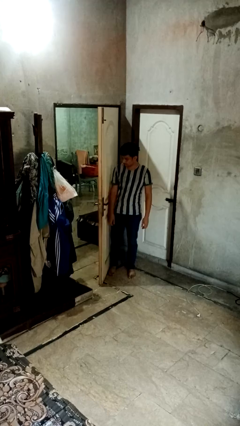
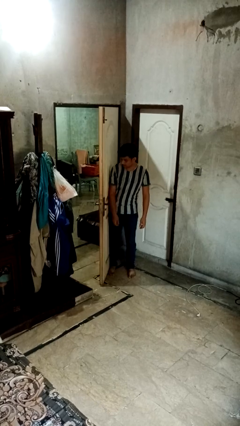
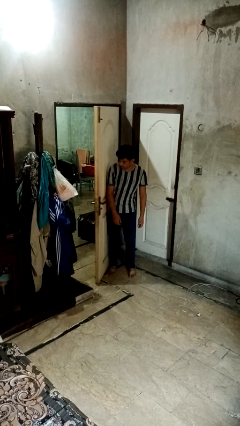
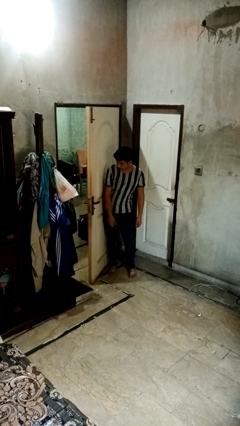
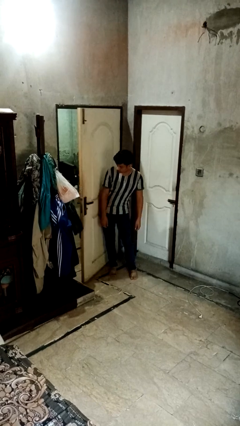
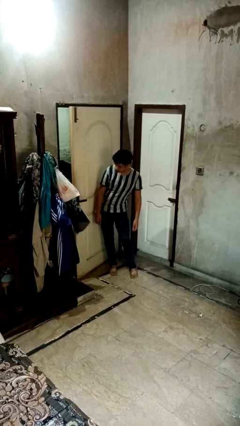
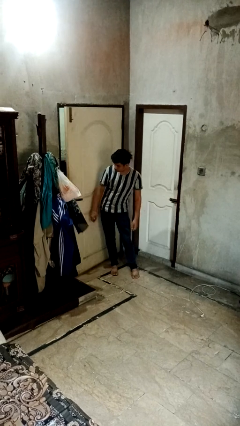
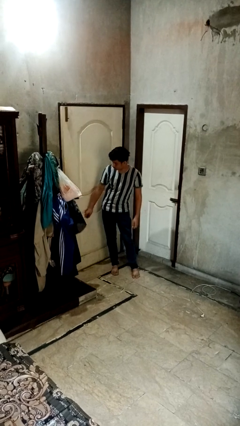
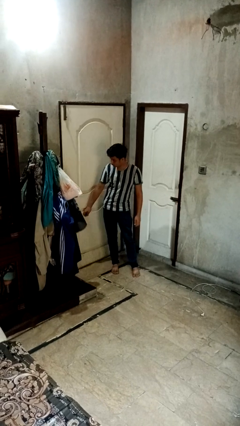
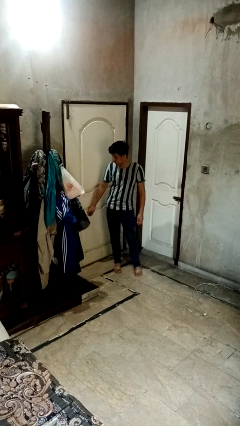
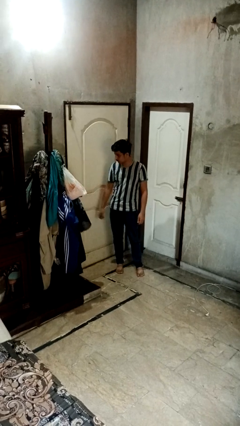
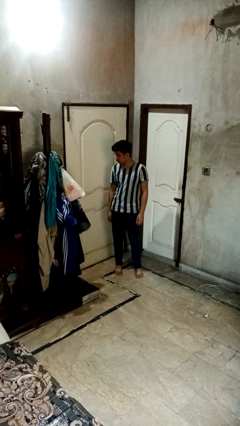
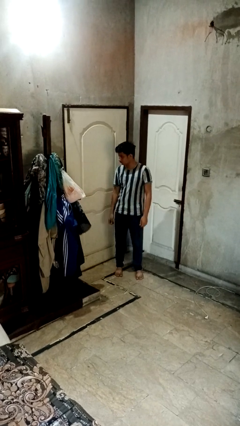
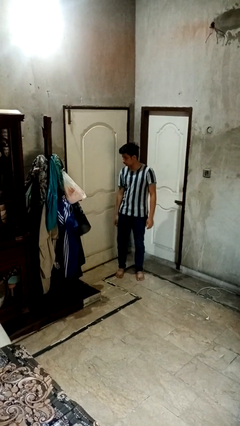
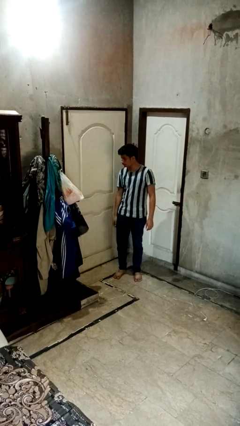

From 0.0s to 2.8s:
person closes door with hip

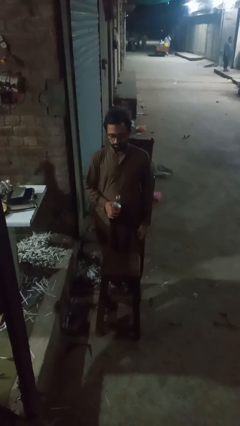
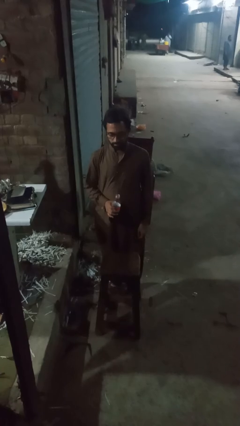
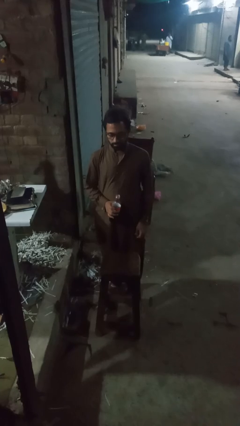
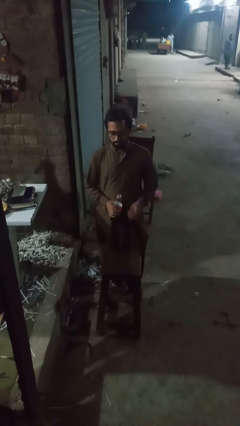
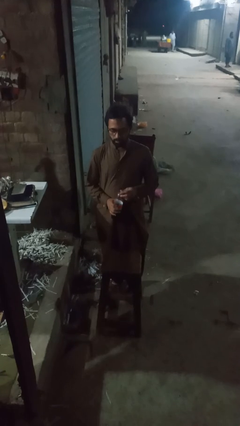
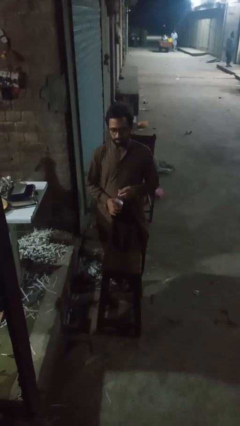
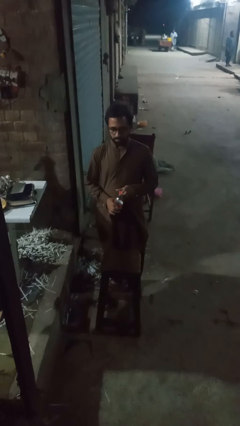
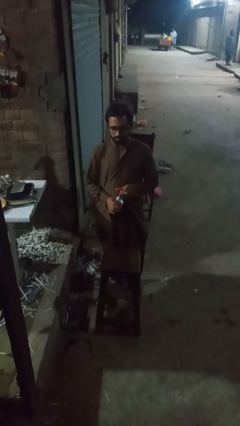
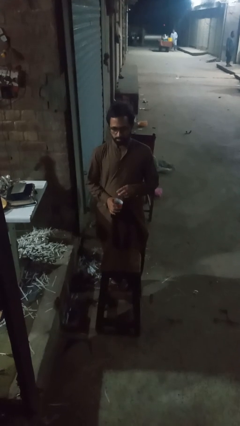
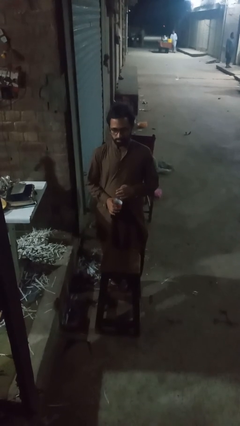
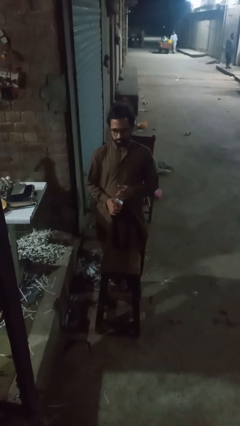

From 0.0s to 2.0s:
person screws lid to bottle

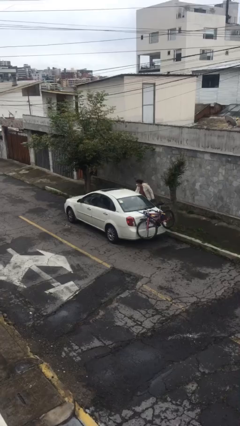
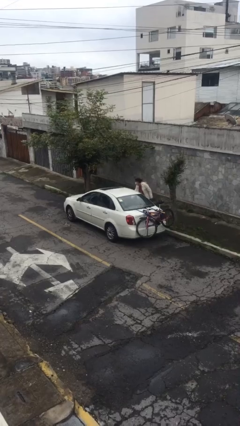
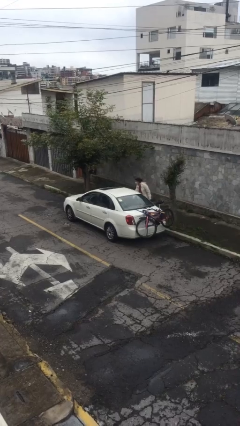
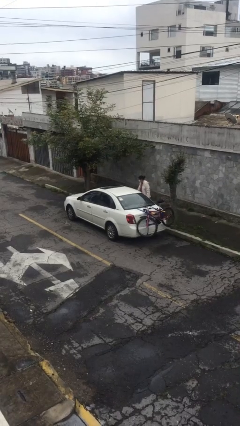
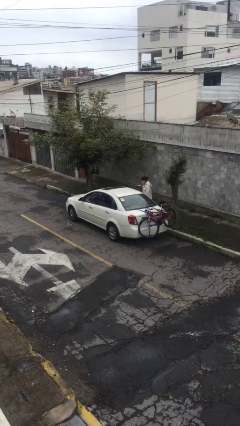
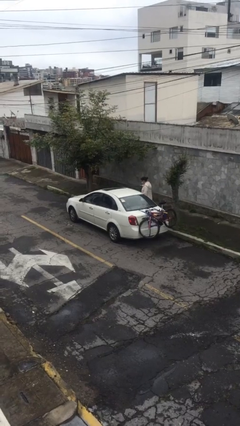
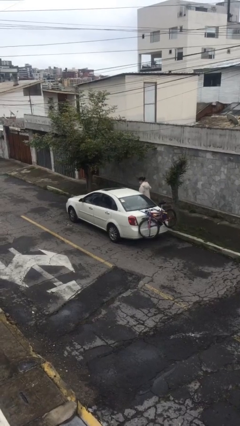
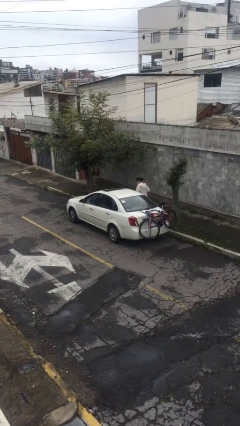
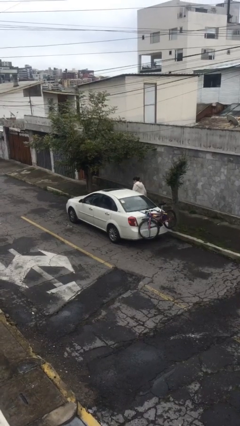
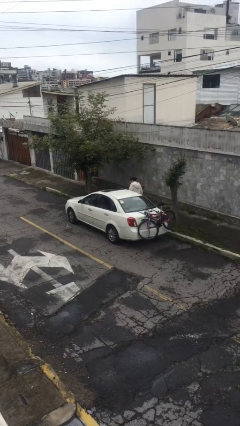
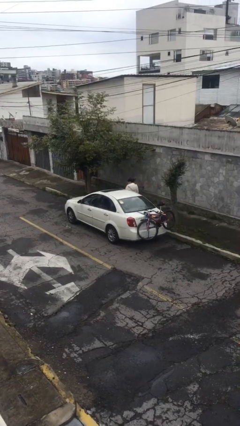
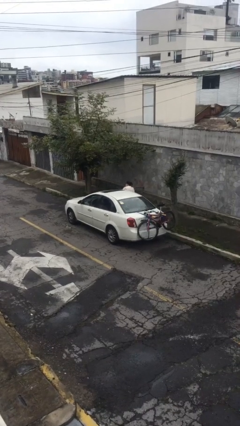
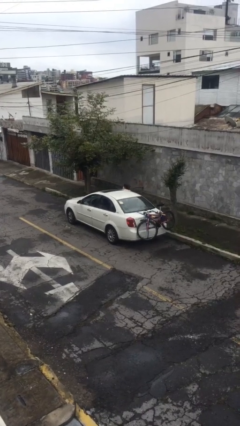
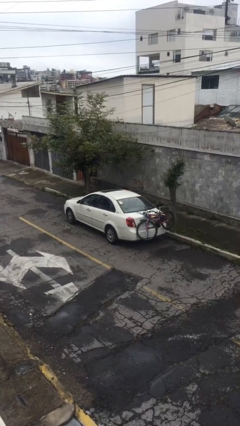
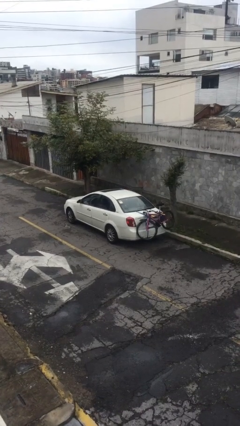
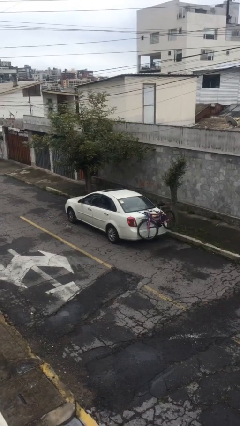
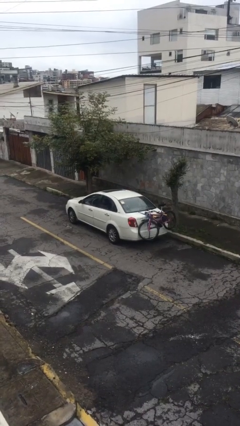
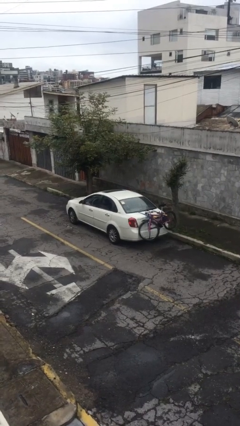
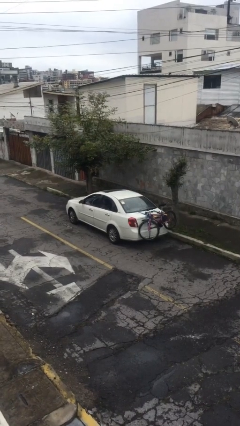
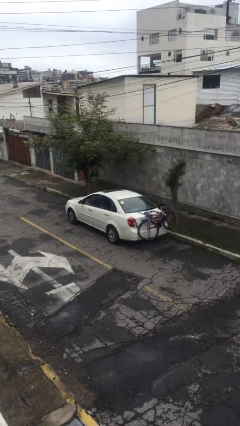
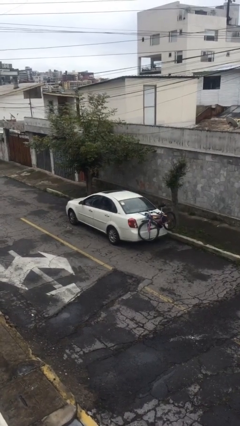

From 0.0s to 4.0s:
car picks up person

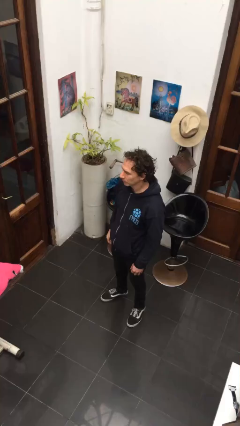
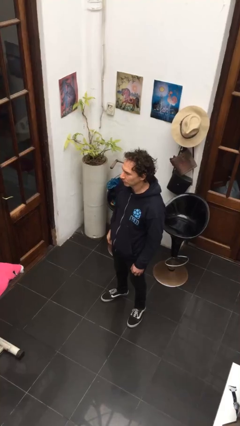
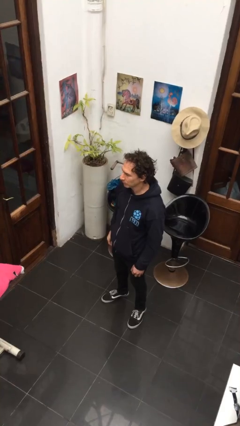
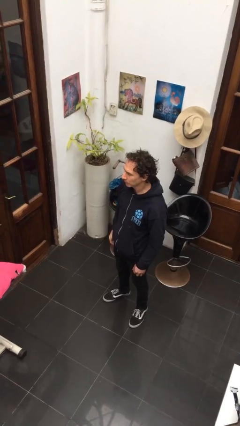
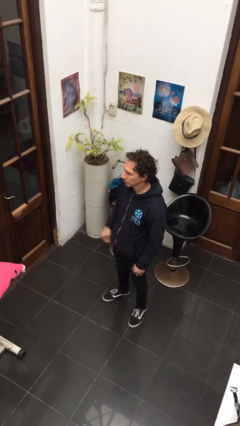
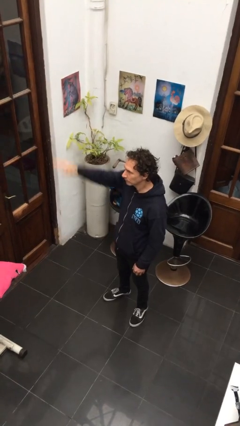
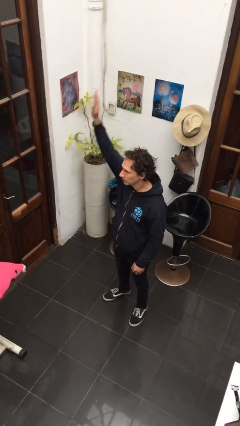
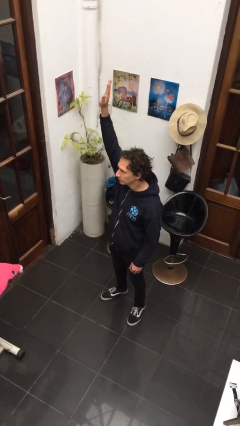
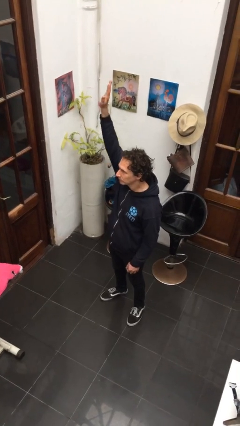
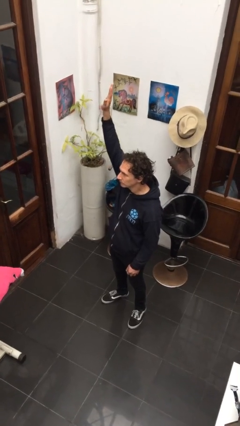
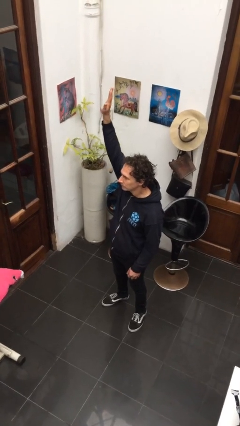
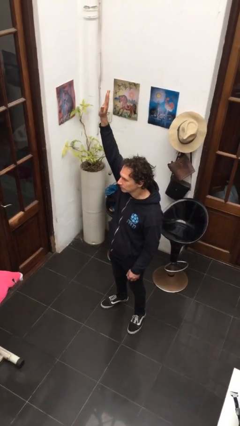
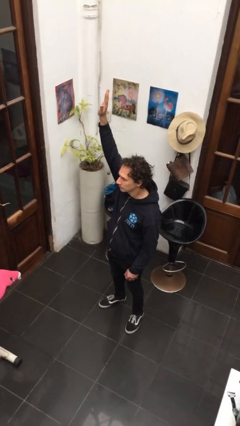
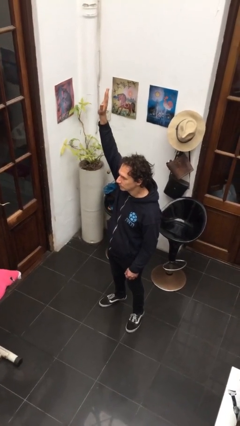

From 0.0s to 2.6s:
person gestures raise hand

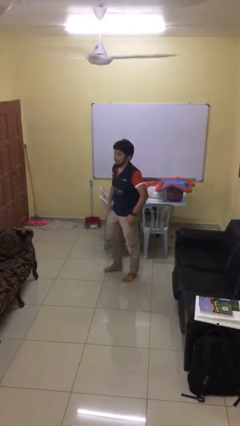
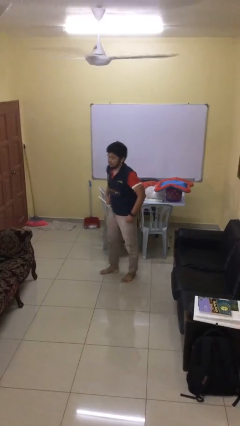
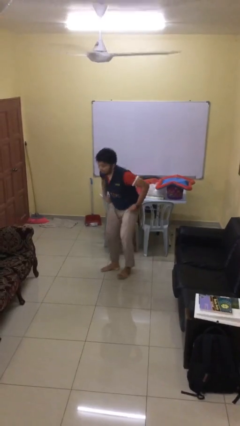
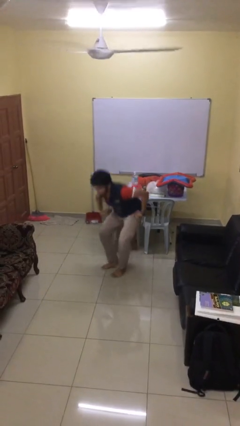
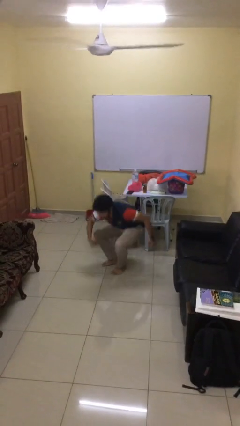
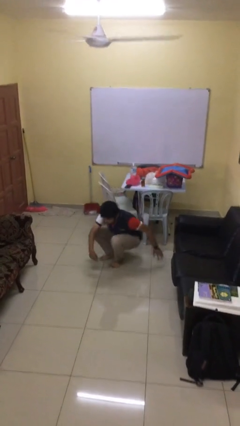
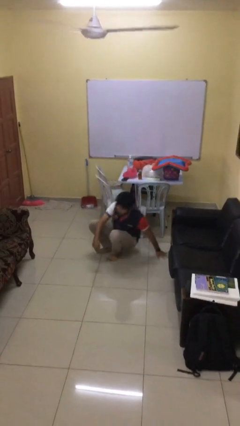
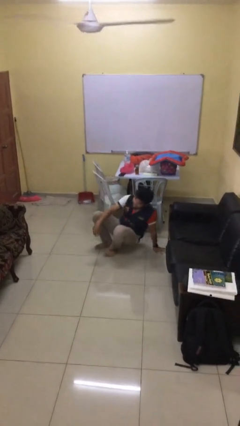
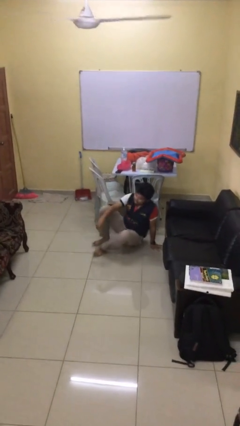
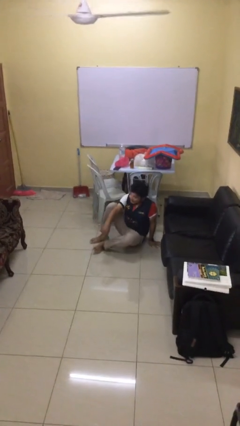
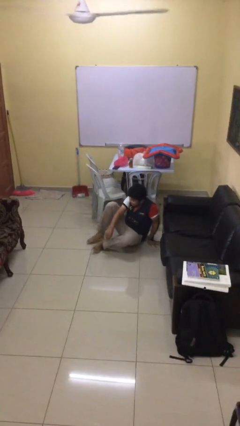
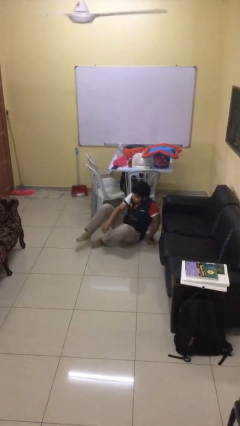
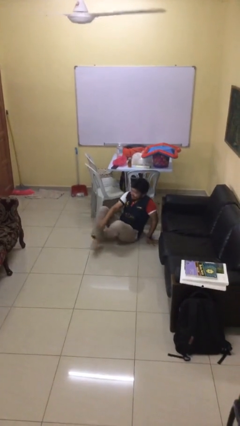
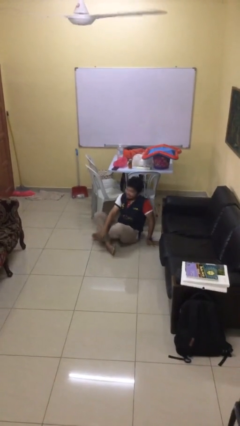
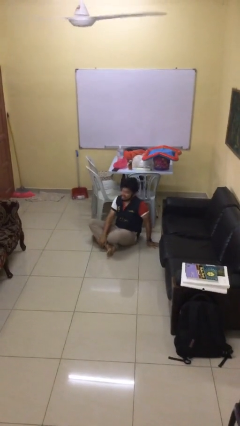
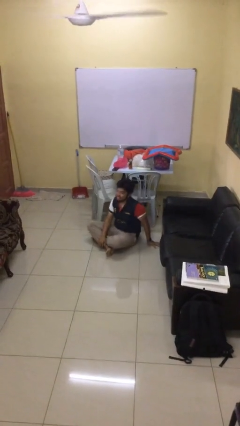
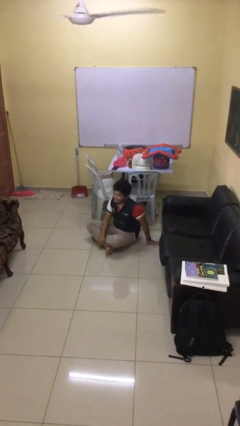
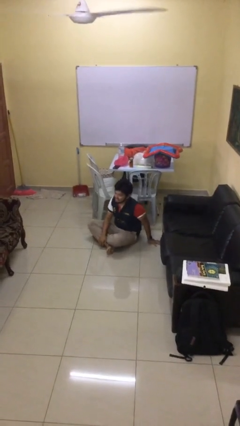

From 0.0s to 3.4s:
person sits crisscross

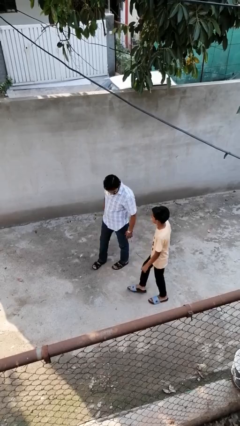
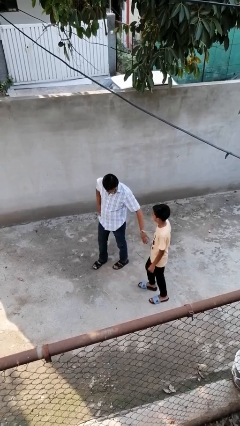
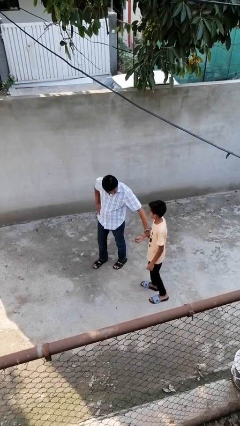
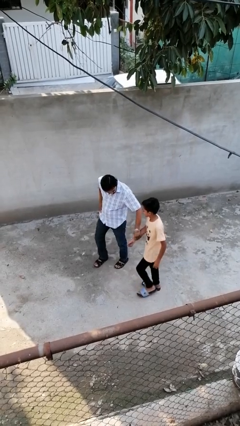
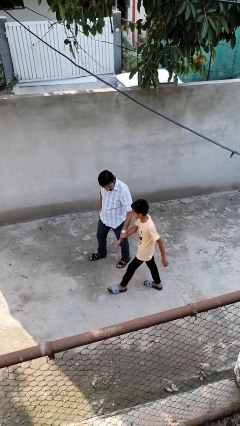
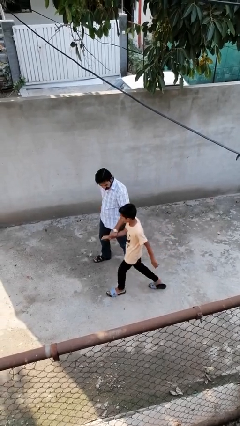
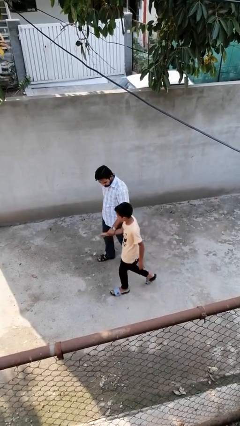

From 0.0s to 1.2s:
person grabs person by forearm

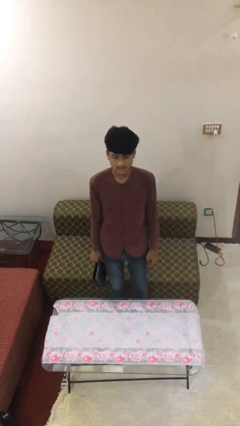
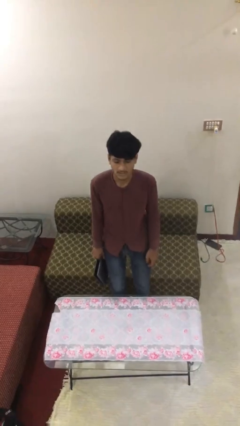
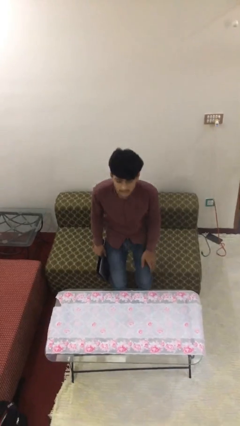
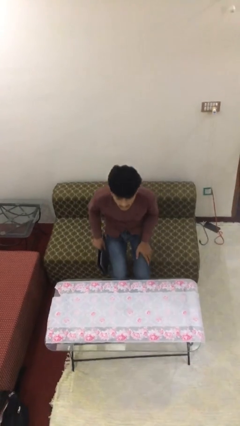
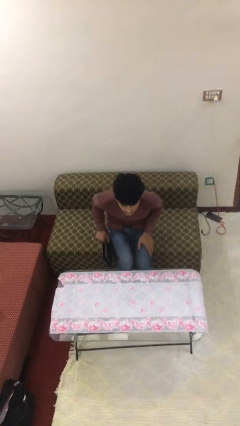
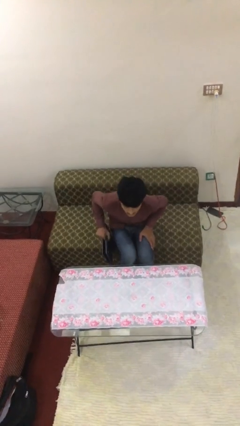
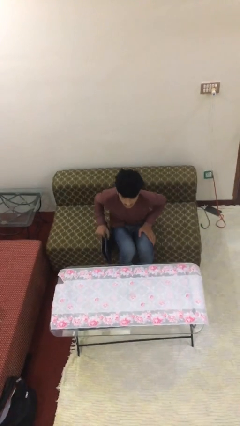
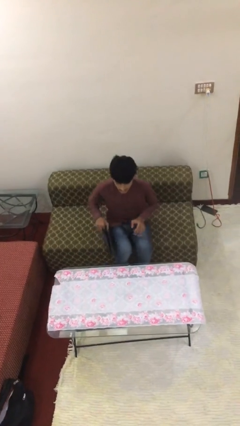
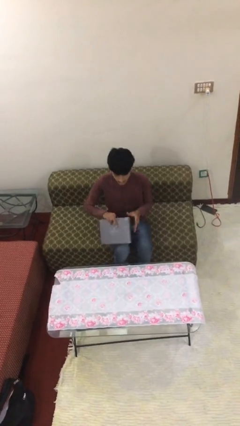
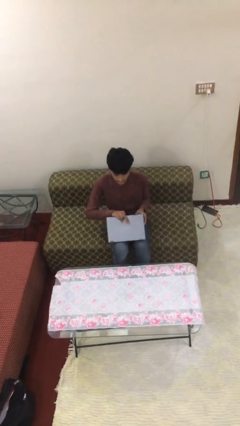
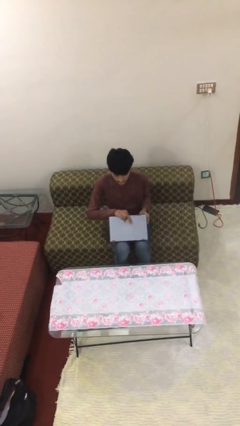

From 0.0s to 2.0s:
person sits down
